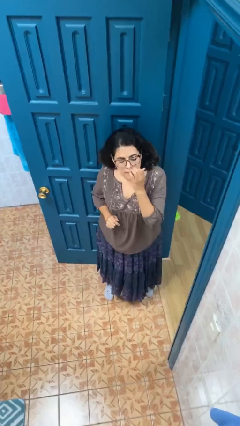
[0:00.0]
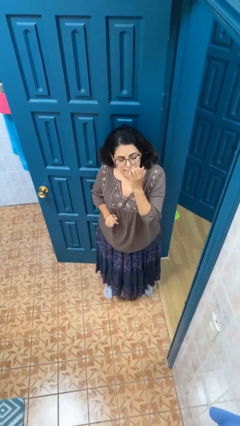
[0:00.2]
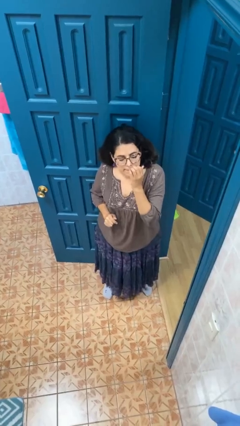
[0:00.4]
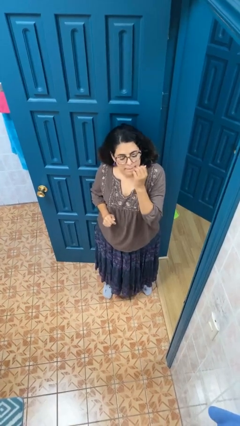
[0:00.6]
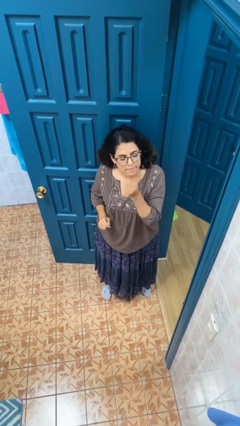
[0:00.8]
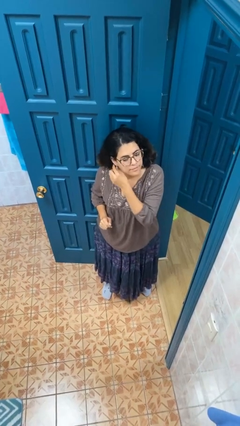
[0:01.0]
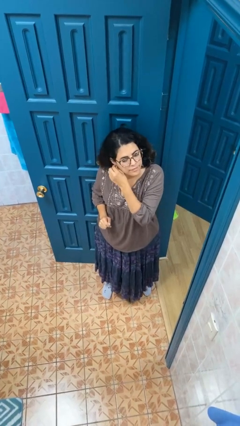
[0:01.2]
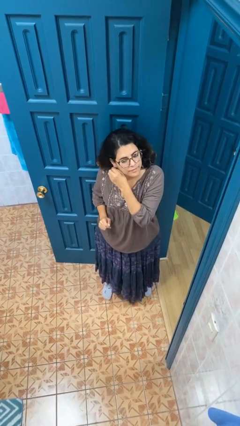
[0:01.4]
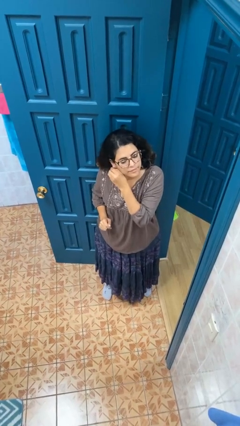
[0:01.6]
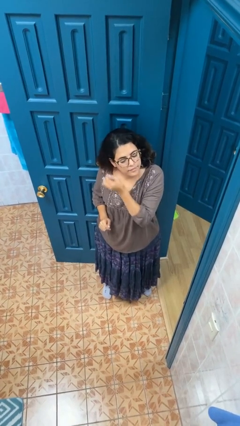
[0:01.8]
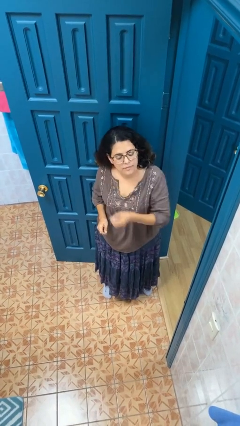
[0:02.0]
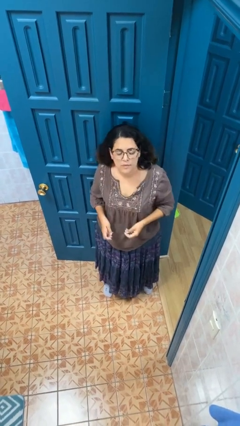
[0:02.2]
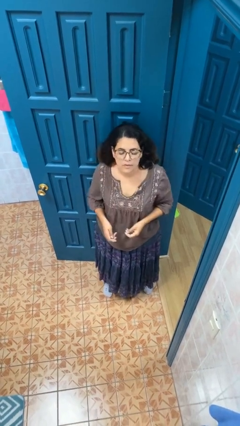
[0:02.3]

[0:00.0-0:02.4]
person takes off earrings

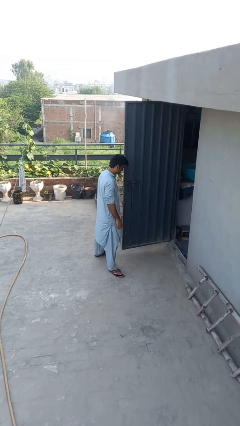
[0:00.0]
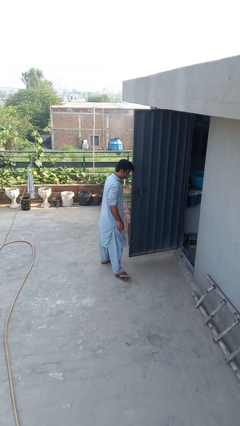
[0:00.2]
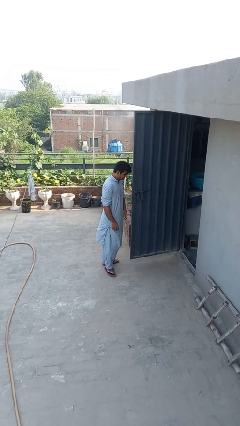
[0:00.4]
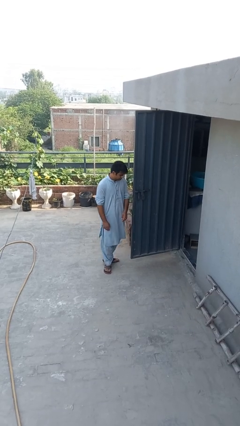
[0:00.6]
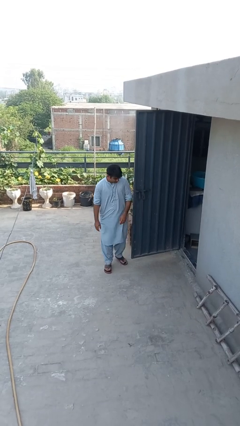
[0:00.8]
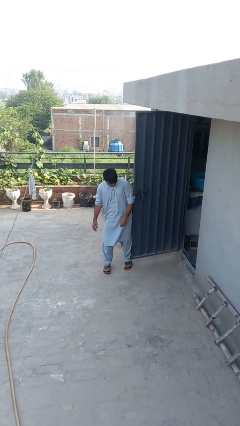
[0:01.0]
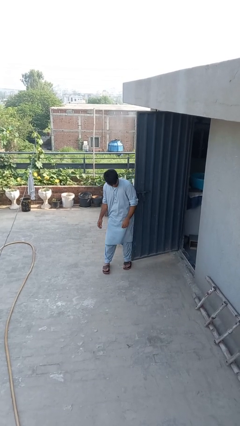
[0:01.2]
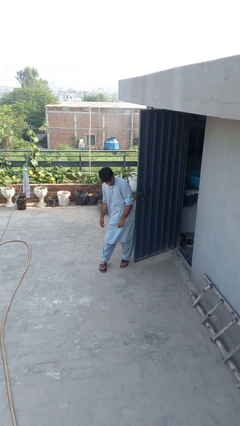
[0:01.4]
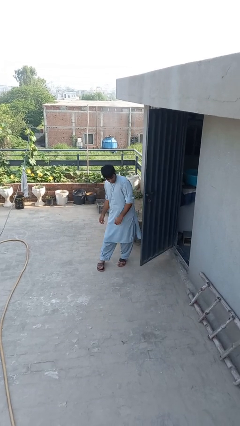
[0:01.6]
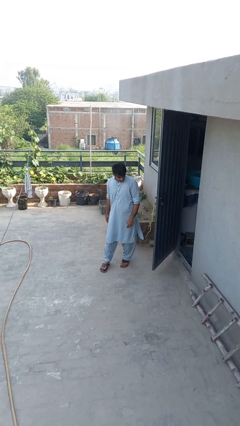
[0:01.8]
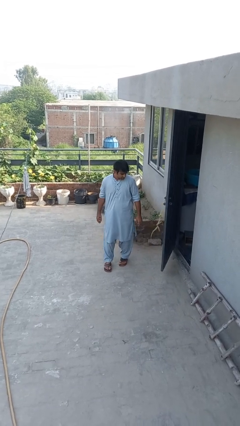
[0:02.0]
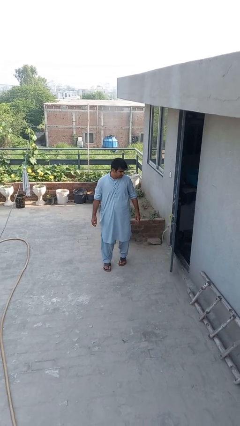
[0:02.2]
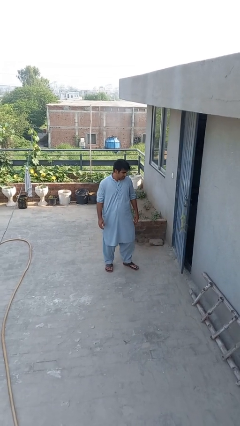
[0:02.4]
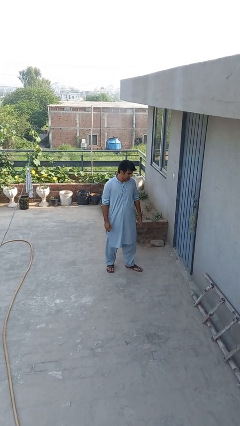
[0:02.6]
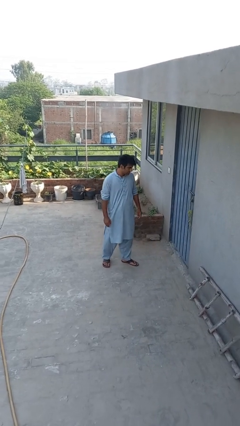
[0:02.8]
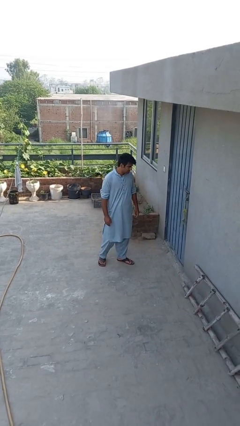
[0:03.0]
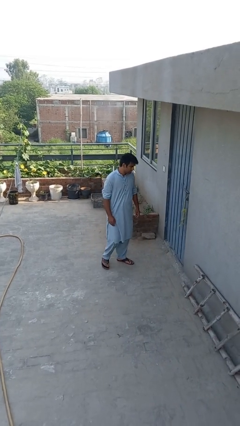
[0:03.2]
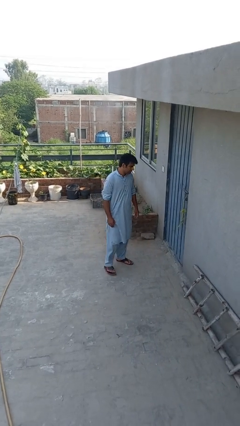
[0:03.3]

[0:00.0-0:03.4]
person closes door with hip

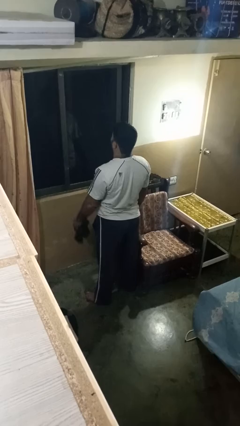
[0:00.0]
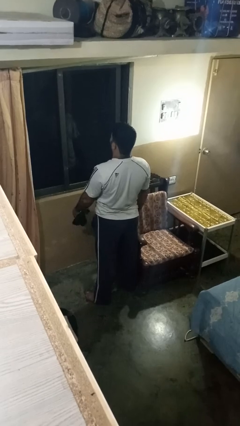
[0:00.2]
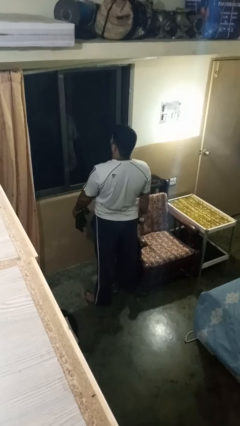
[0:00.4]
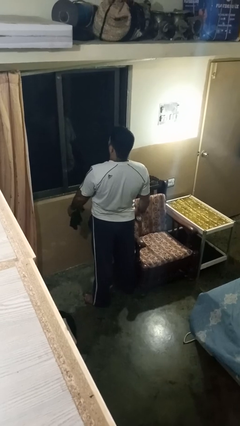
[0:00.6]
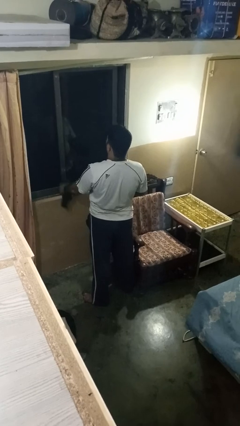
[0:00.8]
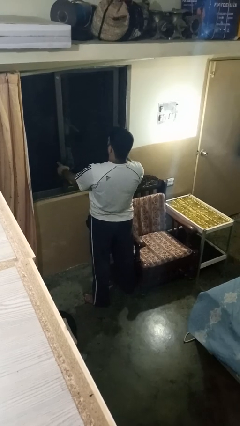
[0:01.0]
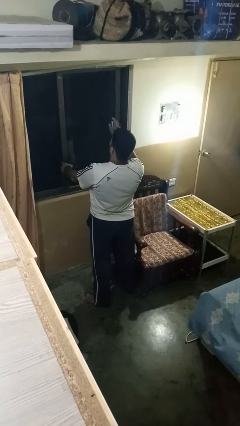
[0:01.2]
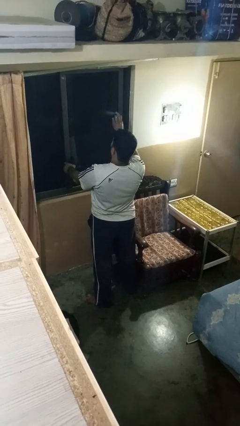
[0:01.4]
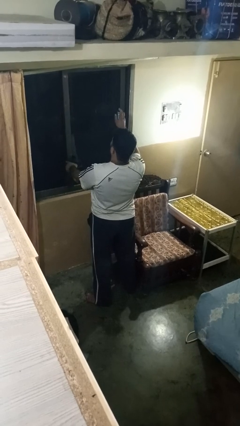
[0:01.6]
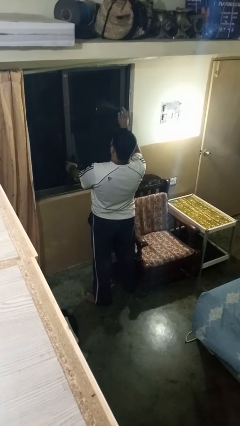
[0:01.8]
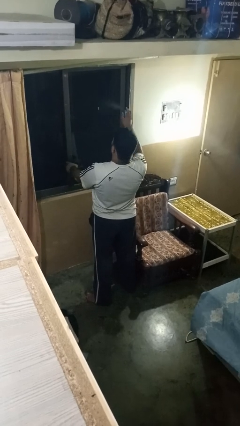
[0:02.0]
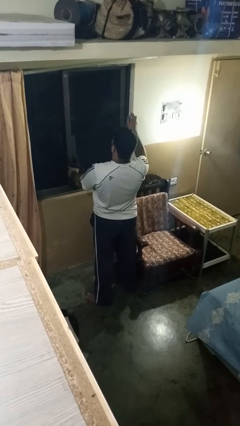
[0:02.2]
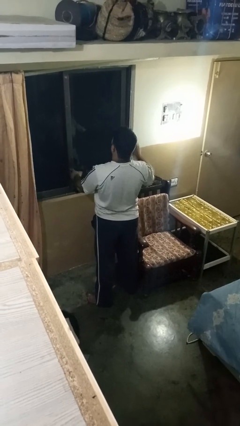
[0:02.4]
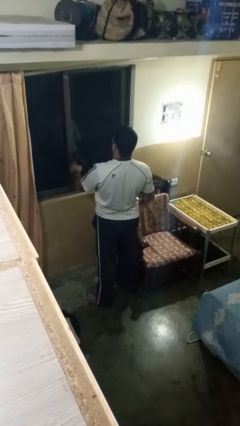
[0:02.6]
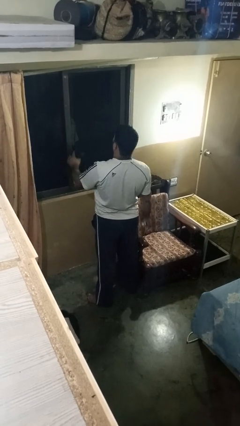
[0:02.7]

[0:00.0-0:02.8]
person sprays from bottle

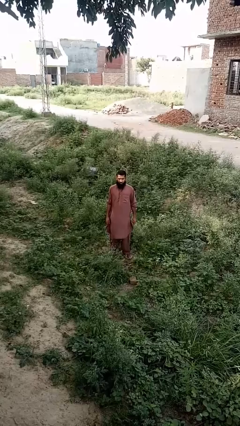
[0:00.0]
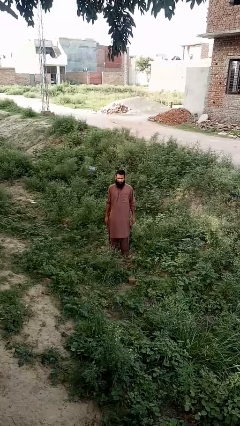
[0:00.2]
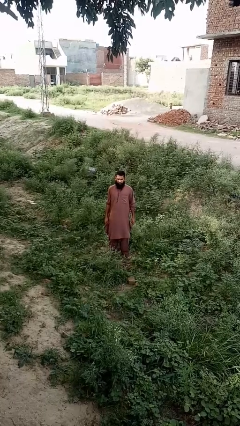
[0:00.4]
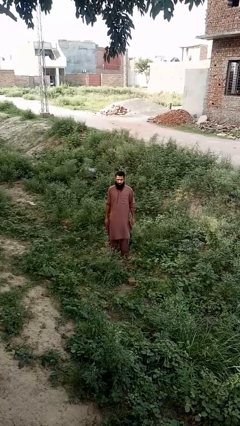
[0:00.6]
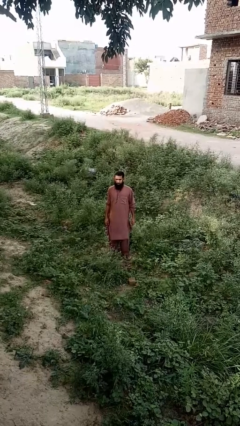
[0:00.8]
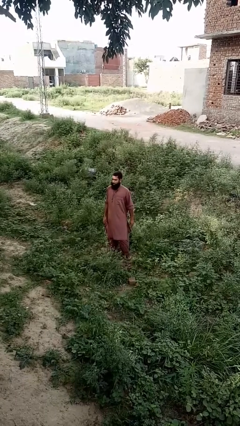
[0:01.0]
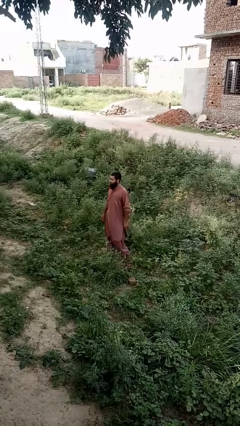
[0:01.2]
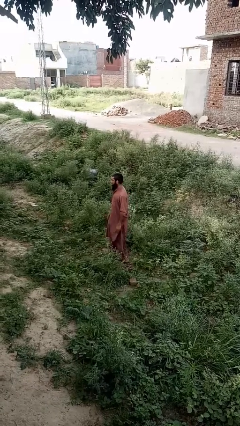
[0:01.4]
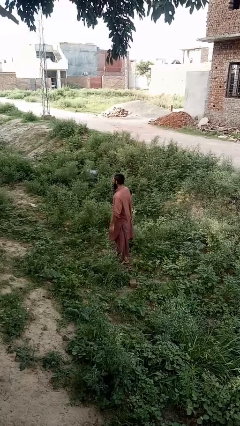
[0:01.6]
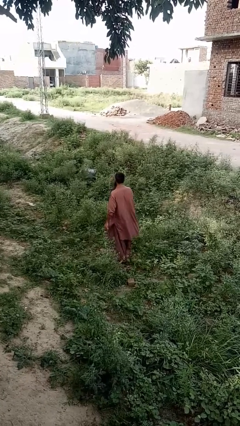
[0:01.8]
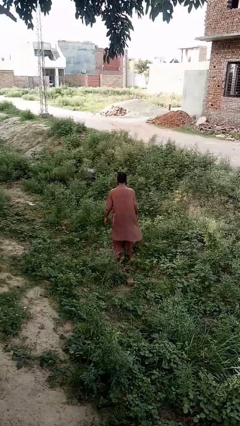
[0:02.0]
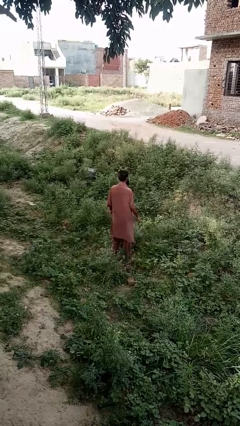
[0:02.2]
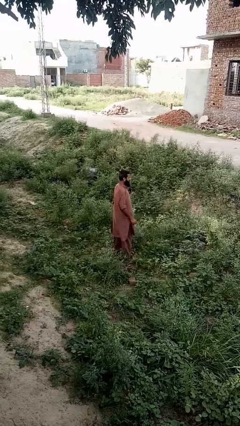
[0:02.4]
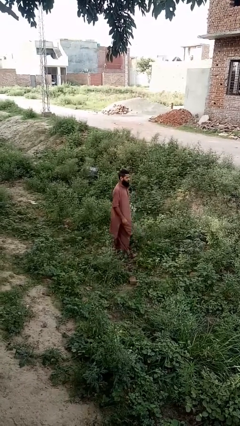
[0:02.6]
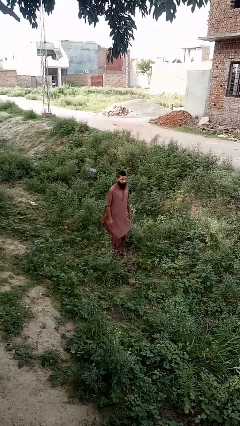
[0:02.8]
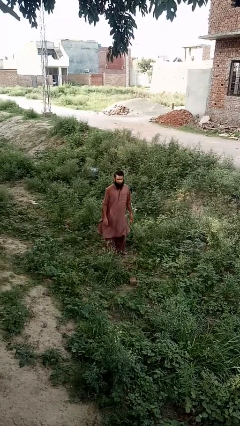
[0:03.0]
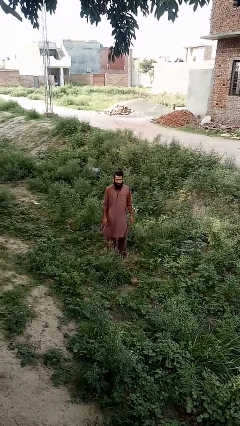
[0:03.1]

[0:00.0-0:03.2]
person twirls

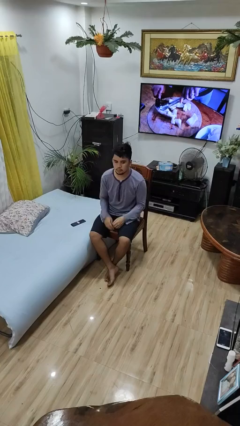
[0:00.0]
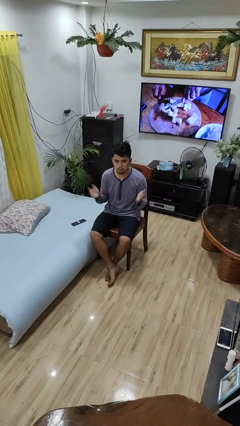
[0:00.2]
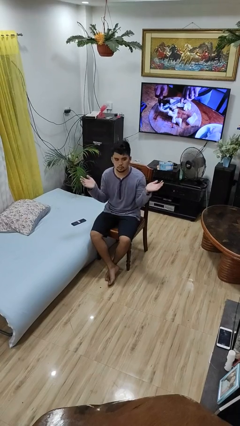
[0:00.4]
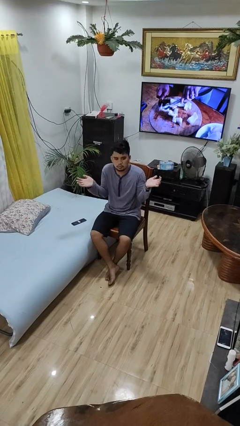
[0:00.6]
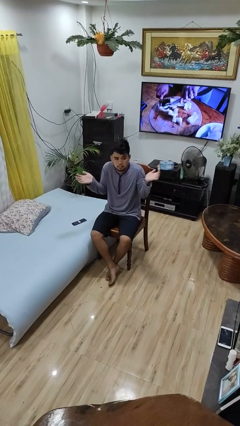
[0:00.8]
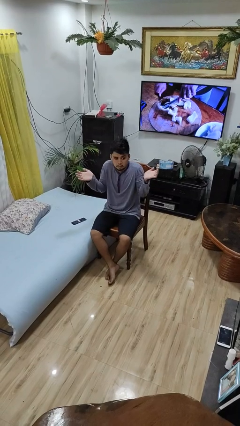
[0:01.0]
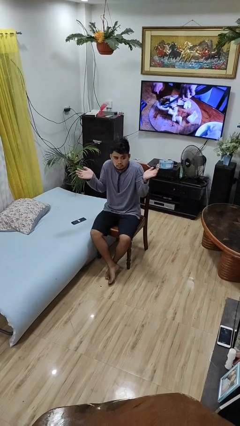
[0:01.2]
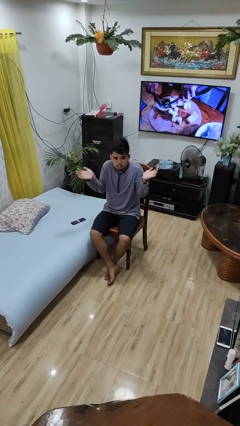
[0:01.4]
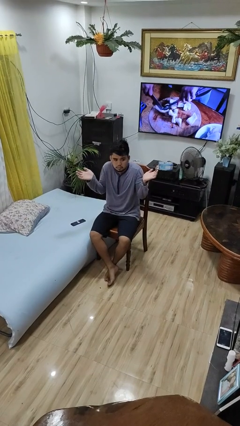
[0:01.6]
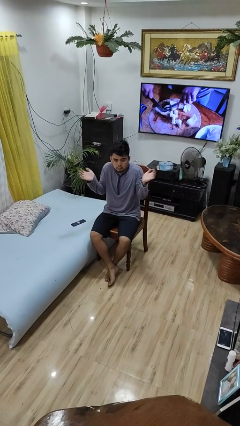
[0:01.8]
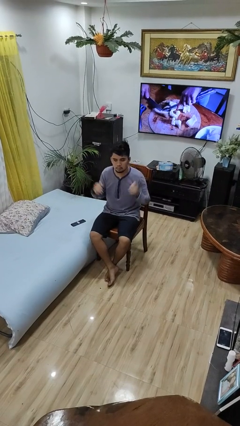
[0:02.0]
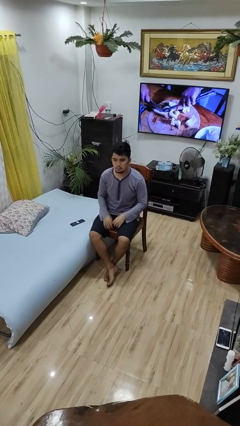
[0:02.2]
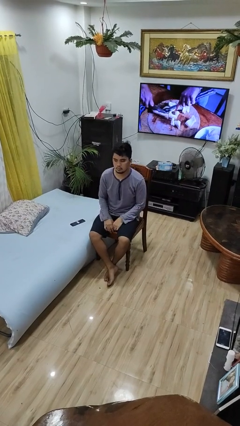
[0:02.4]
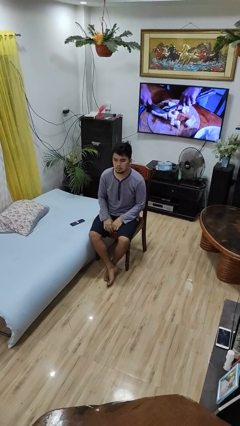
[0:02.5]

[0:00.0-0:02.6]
person shrugs

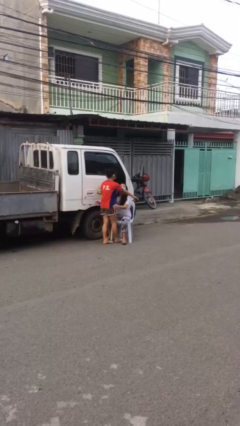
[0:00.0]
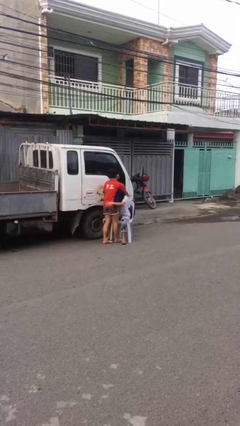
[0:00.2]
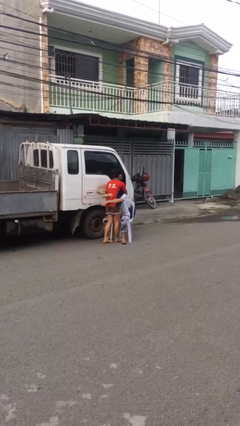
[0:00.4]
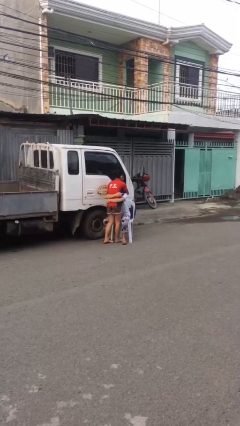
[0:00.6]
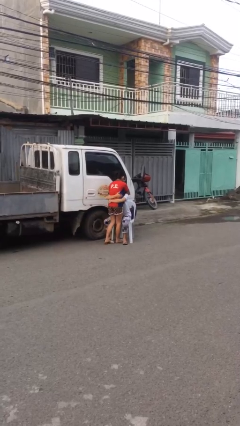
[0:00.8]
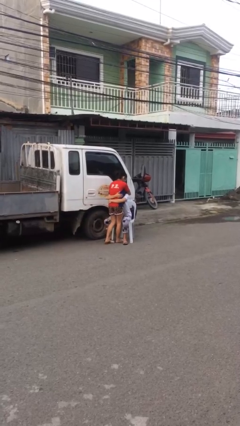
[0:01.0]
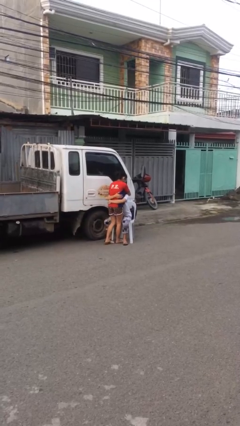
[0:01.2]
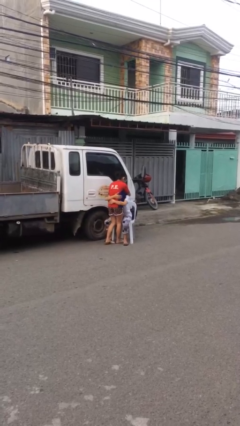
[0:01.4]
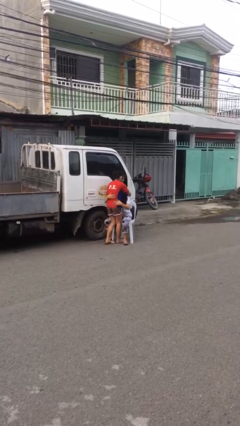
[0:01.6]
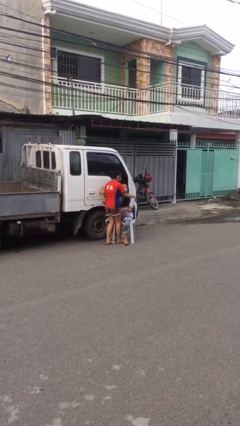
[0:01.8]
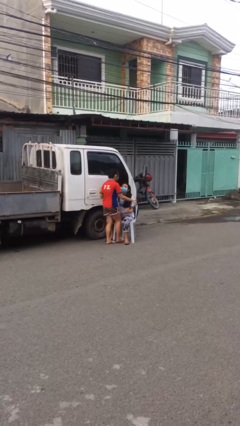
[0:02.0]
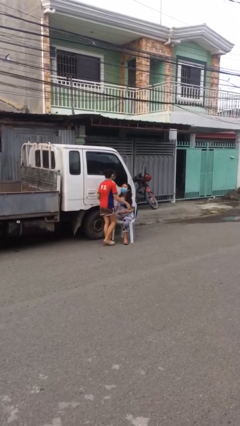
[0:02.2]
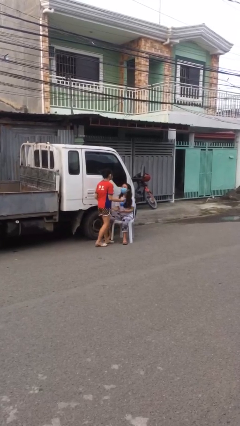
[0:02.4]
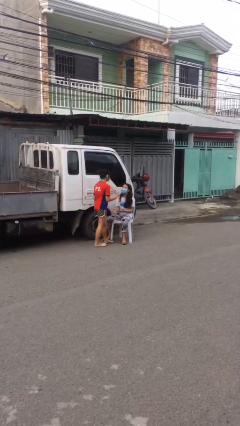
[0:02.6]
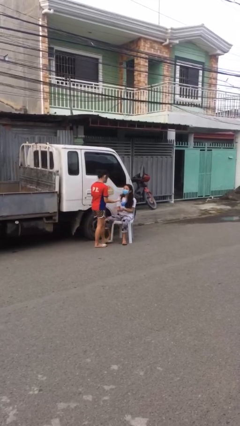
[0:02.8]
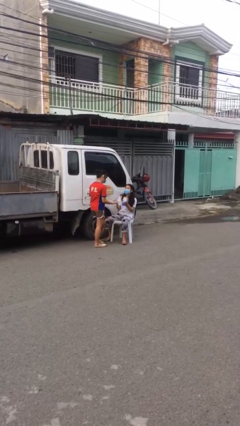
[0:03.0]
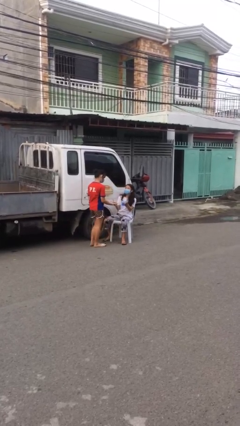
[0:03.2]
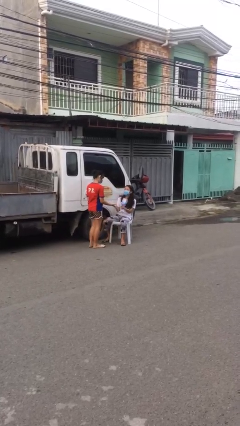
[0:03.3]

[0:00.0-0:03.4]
person embraces person
